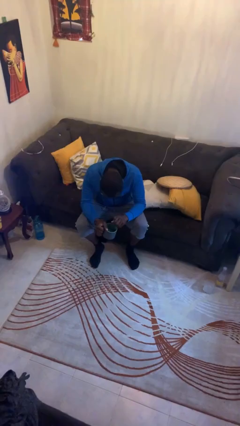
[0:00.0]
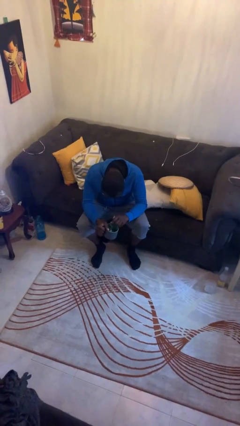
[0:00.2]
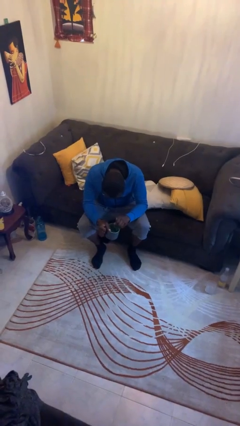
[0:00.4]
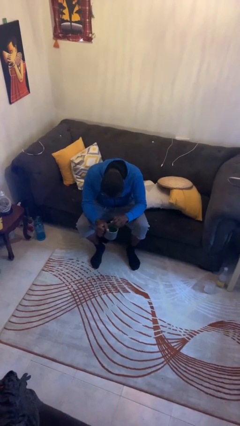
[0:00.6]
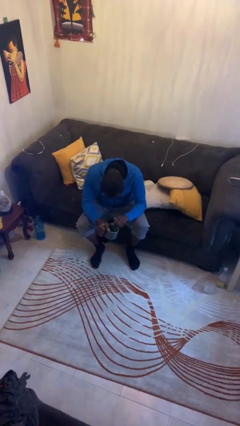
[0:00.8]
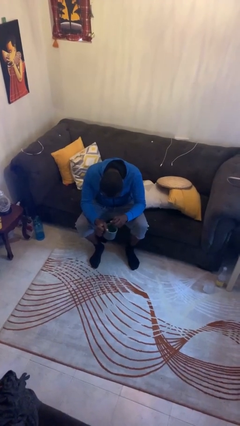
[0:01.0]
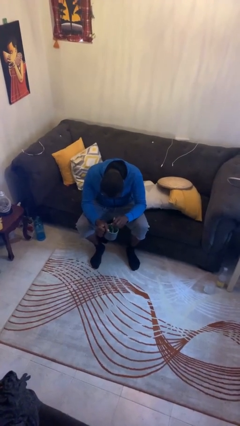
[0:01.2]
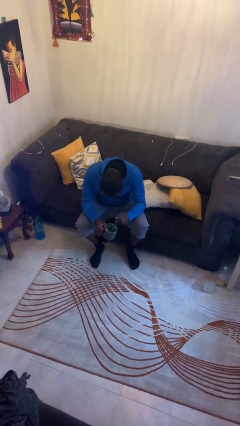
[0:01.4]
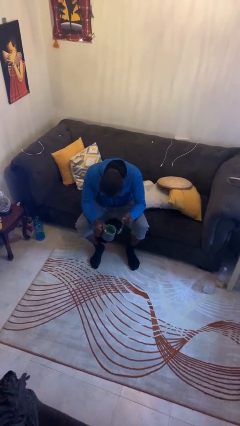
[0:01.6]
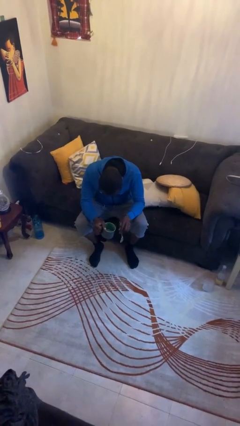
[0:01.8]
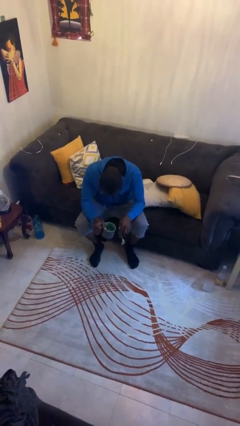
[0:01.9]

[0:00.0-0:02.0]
person stirs mug

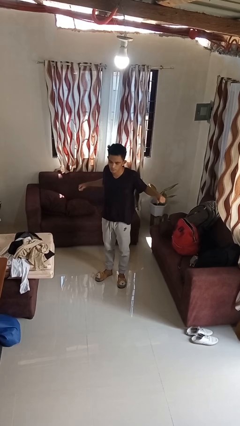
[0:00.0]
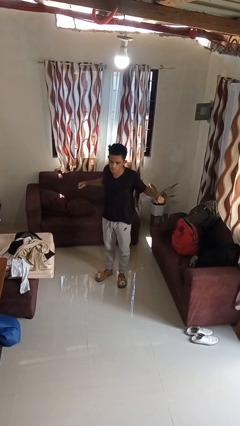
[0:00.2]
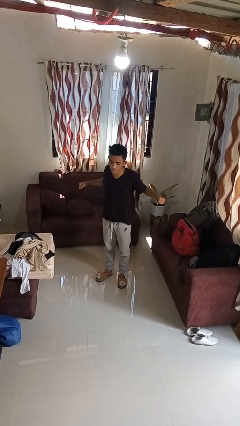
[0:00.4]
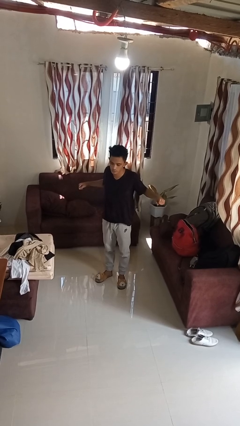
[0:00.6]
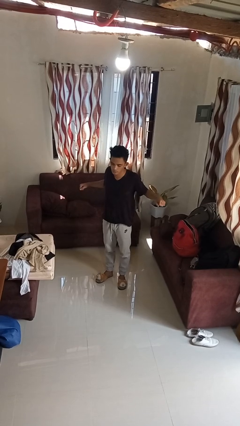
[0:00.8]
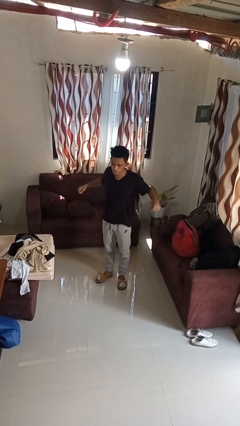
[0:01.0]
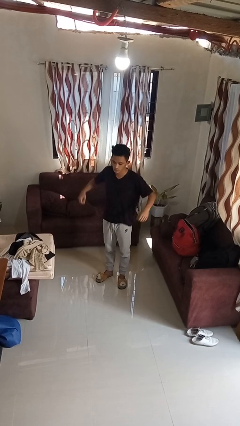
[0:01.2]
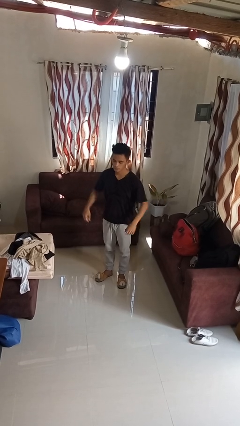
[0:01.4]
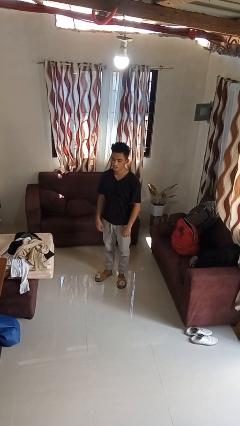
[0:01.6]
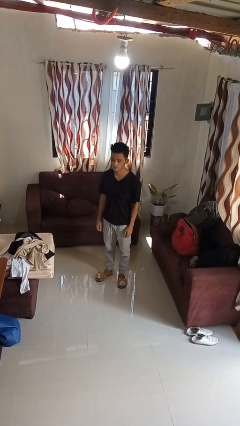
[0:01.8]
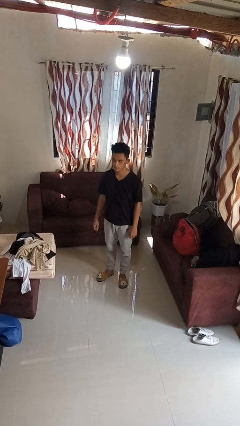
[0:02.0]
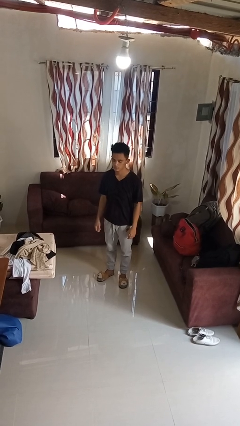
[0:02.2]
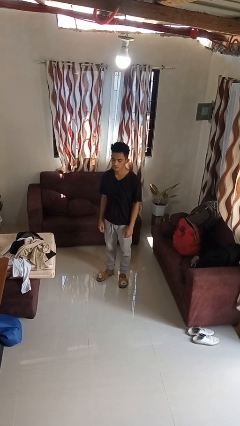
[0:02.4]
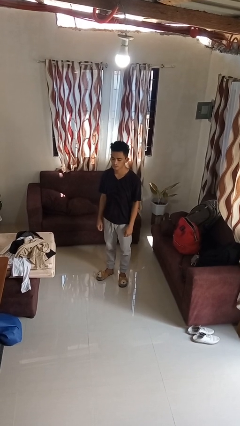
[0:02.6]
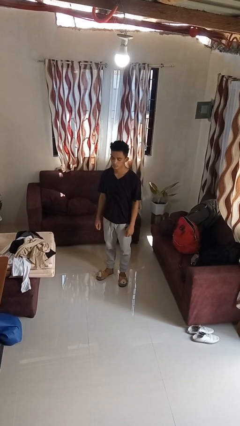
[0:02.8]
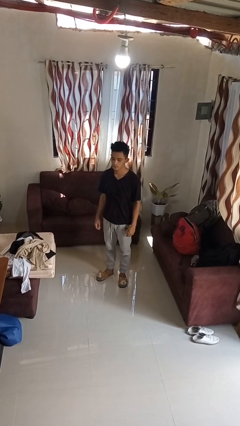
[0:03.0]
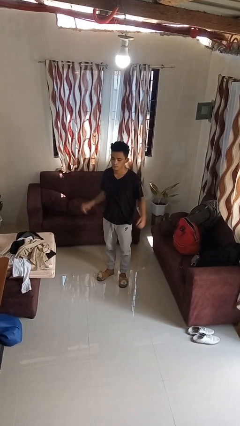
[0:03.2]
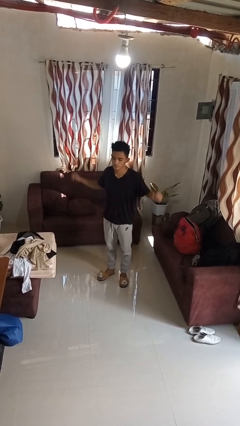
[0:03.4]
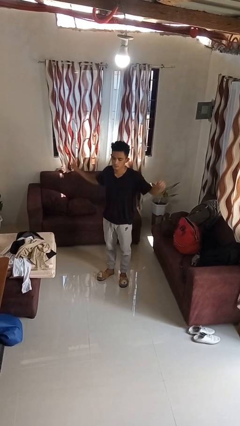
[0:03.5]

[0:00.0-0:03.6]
person stretches back

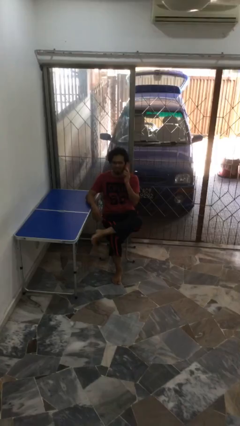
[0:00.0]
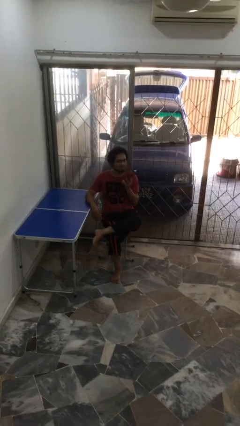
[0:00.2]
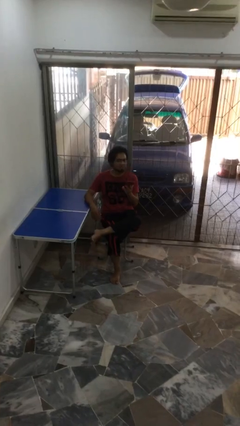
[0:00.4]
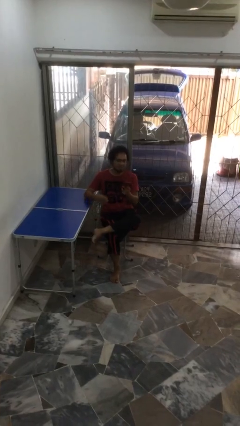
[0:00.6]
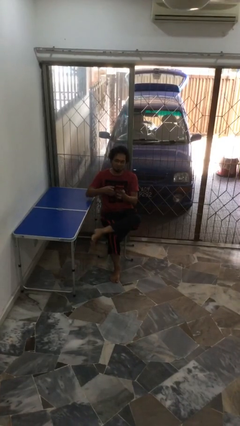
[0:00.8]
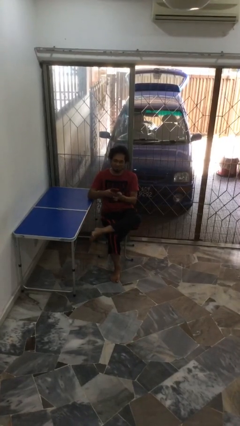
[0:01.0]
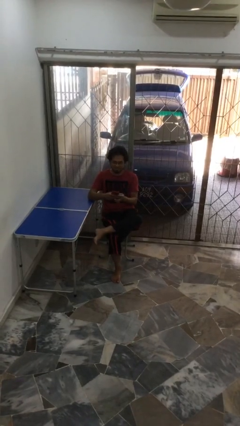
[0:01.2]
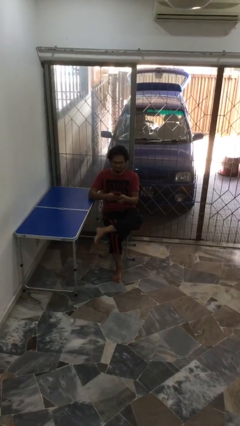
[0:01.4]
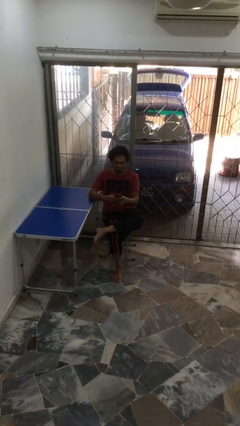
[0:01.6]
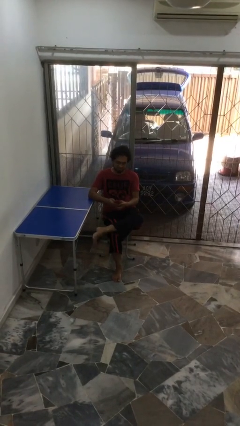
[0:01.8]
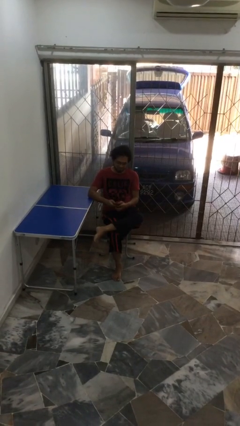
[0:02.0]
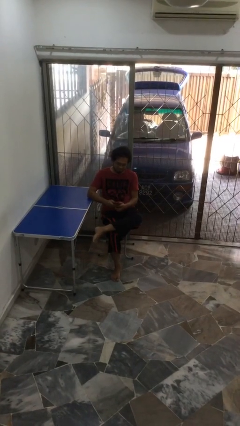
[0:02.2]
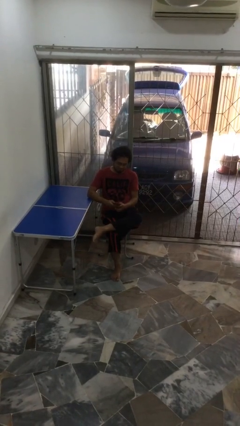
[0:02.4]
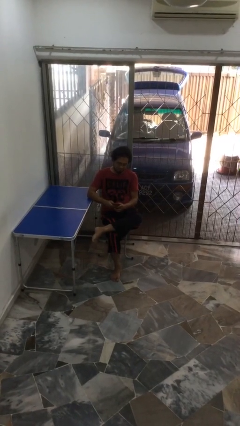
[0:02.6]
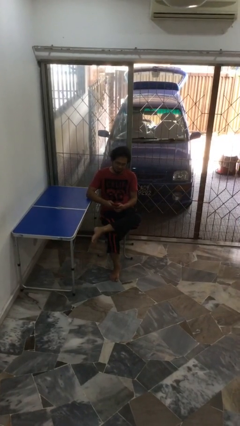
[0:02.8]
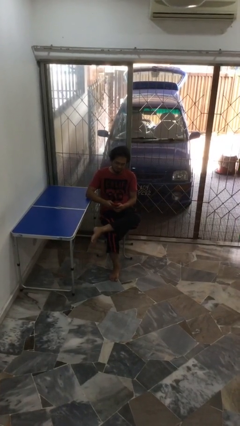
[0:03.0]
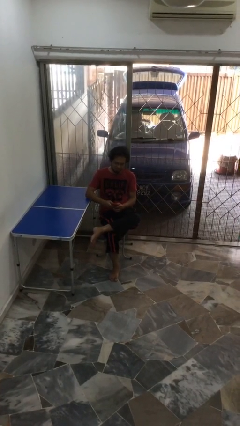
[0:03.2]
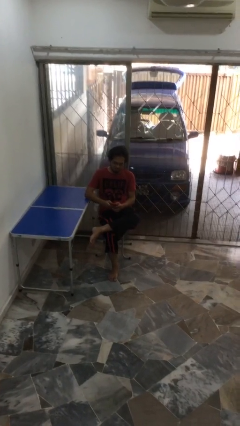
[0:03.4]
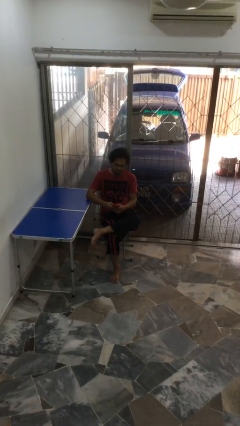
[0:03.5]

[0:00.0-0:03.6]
person texts on phone

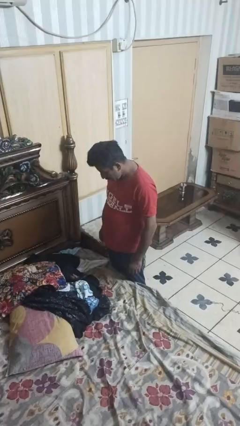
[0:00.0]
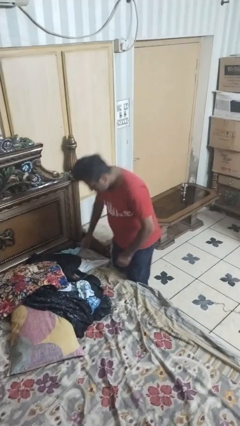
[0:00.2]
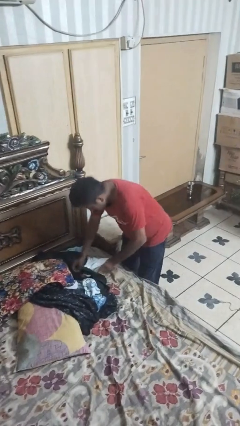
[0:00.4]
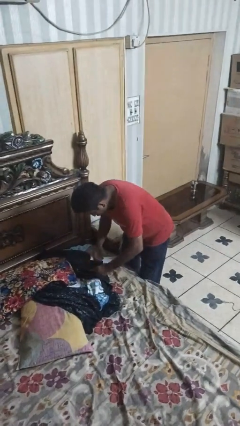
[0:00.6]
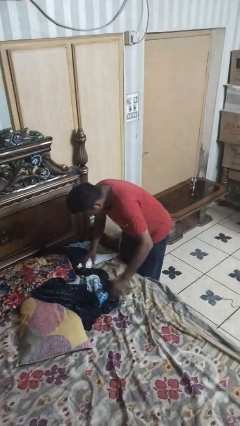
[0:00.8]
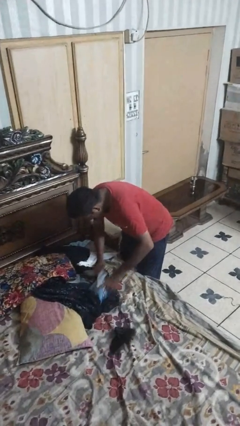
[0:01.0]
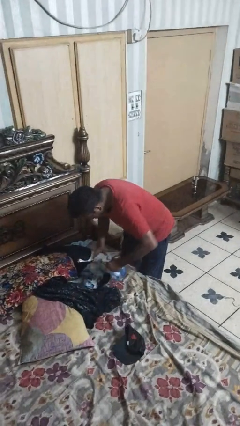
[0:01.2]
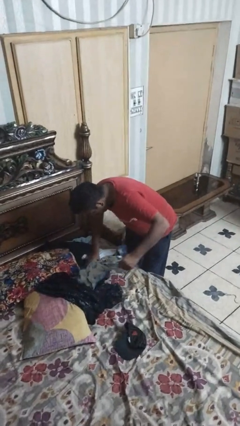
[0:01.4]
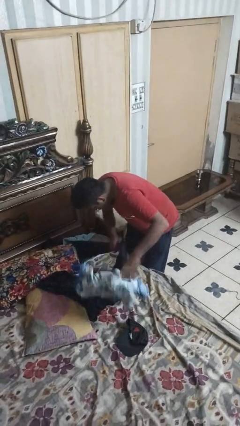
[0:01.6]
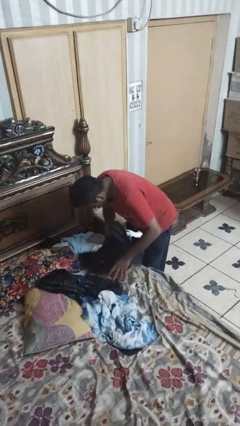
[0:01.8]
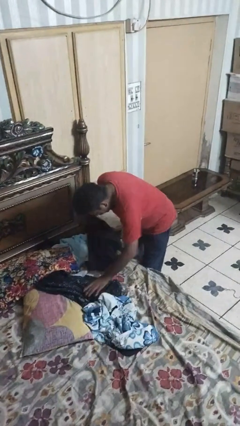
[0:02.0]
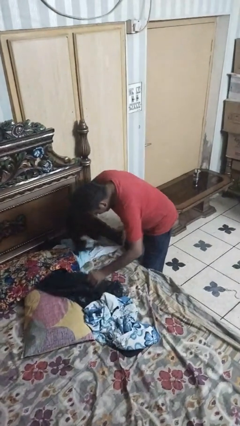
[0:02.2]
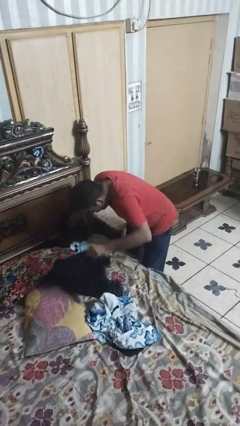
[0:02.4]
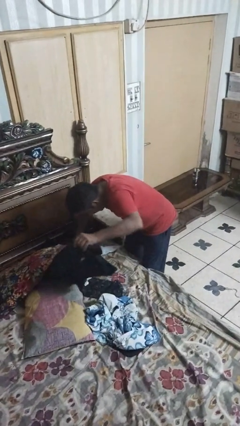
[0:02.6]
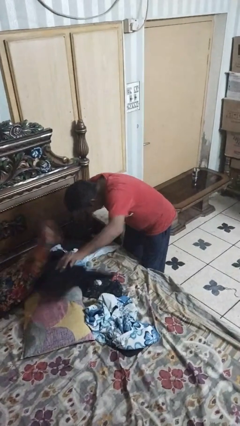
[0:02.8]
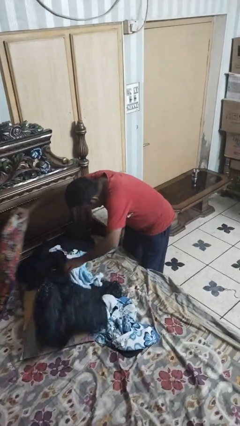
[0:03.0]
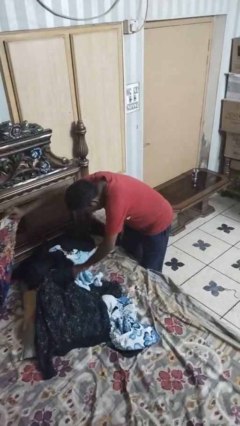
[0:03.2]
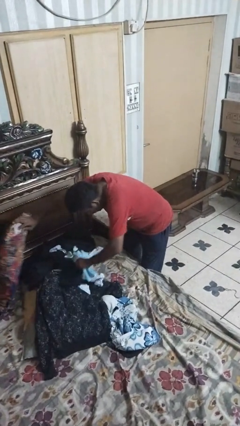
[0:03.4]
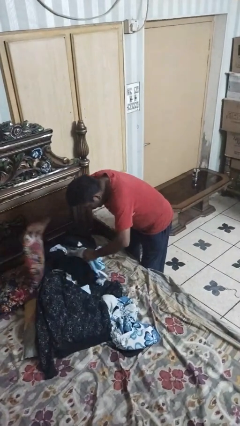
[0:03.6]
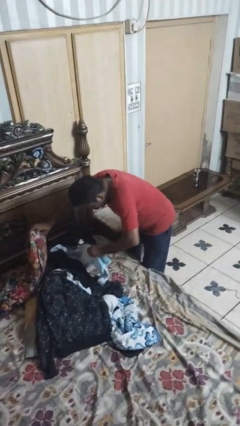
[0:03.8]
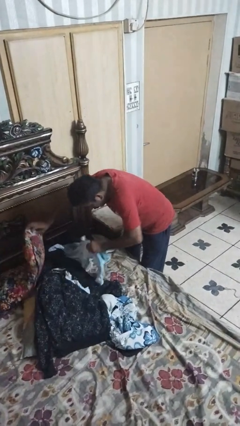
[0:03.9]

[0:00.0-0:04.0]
person searches under bed

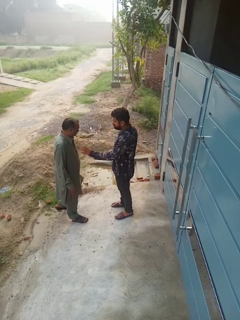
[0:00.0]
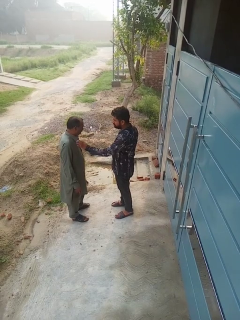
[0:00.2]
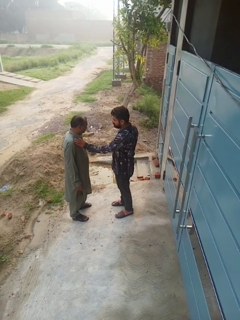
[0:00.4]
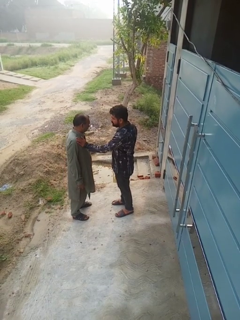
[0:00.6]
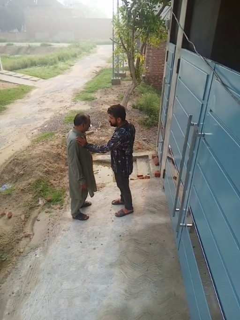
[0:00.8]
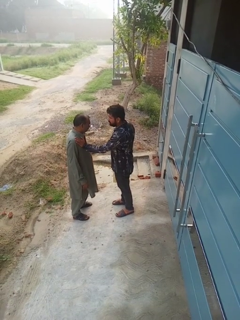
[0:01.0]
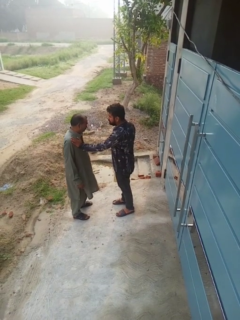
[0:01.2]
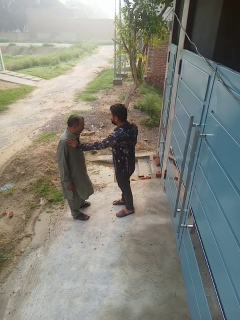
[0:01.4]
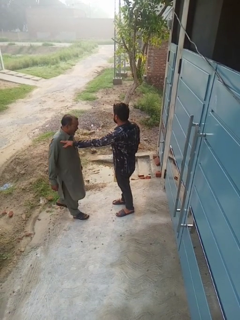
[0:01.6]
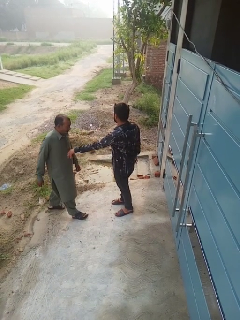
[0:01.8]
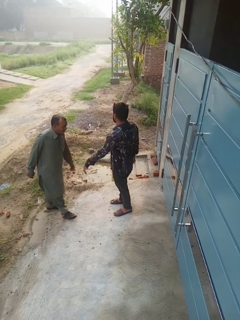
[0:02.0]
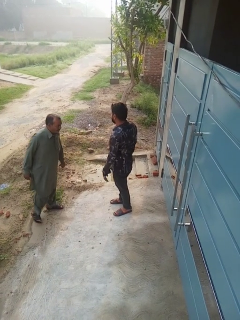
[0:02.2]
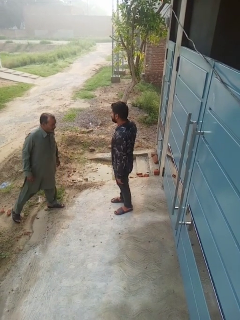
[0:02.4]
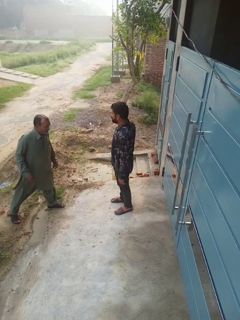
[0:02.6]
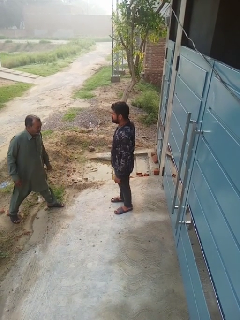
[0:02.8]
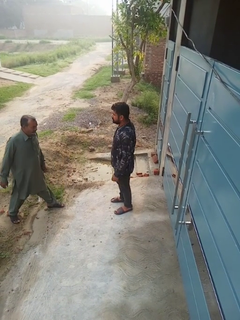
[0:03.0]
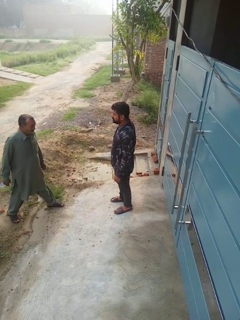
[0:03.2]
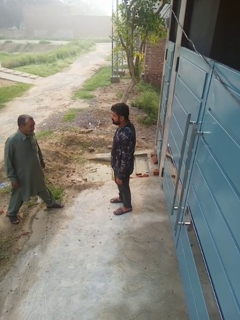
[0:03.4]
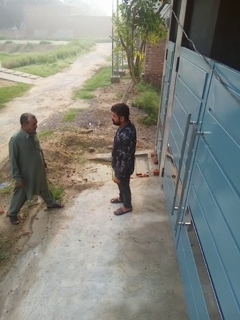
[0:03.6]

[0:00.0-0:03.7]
person shoves person

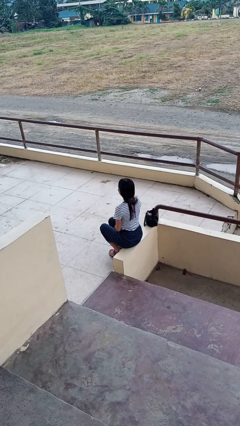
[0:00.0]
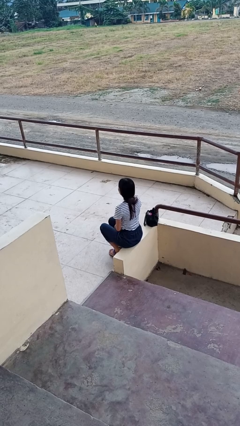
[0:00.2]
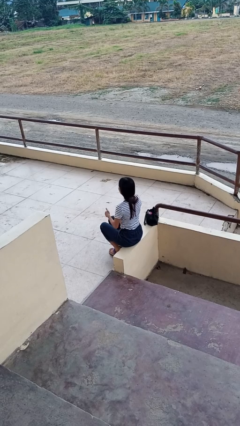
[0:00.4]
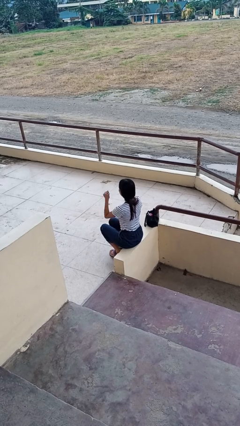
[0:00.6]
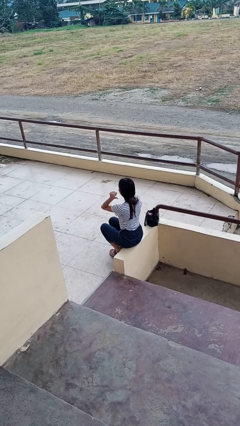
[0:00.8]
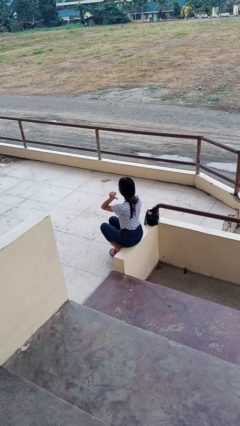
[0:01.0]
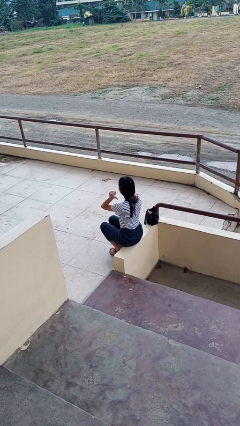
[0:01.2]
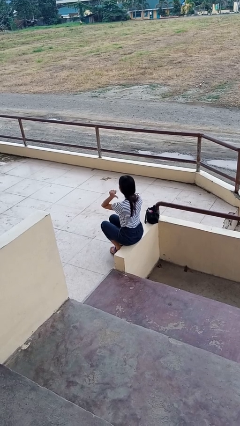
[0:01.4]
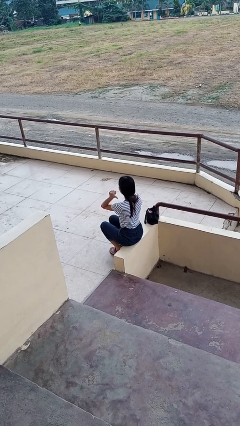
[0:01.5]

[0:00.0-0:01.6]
person gestures behind me
